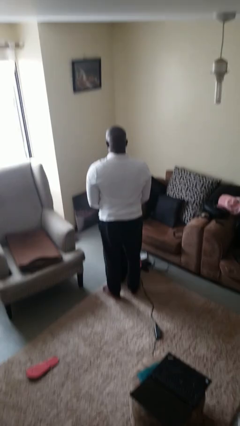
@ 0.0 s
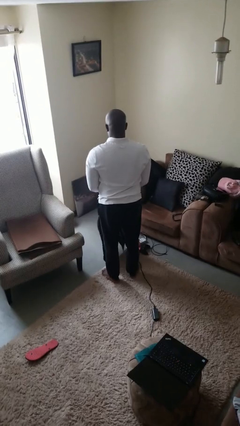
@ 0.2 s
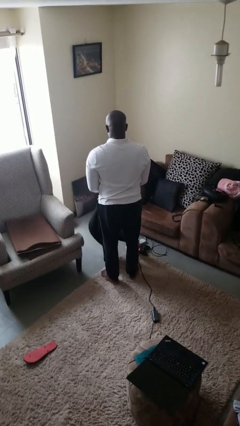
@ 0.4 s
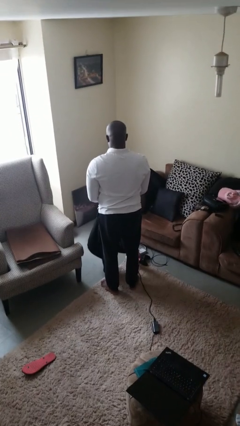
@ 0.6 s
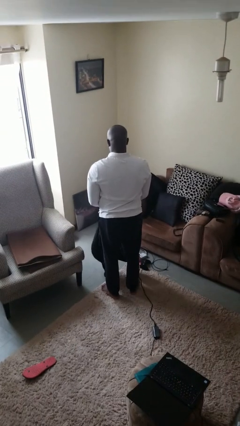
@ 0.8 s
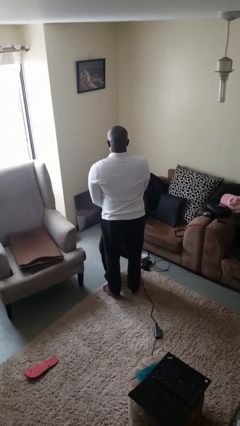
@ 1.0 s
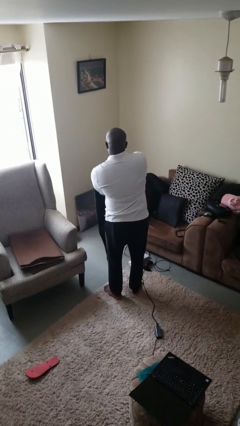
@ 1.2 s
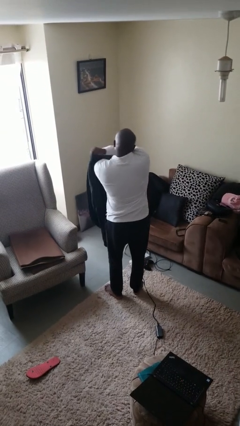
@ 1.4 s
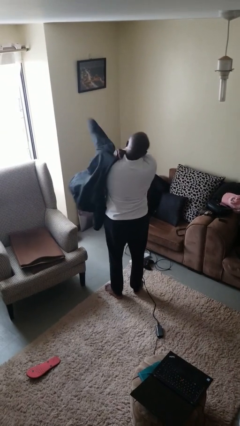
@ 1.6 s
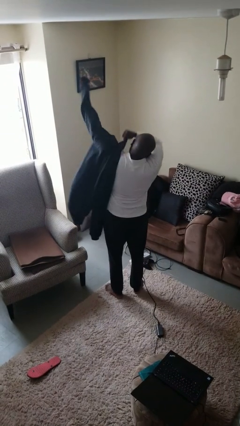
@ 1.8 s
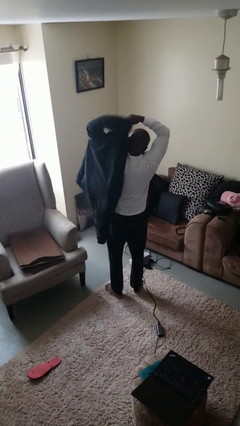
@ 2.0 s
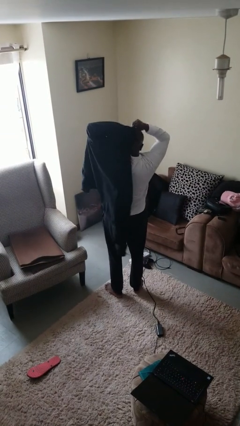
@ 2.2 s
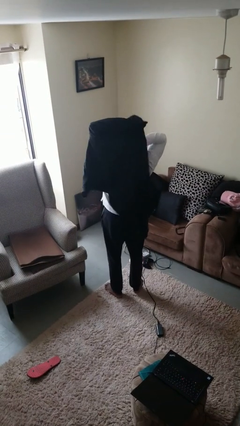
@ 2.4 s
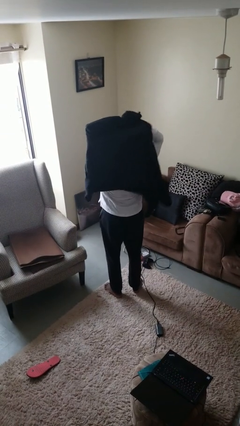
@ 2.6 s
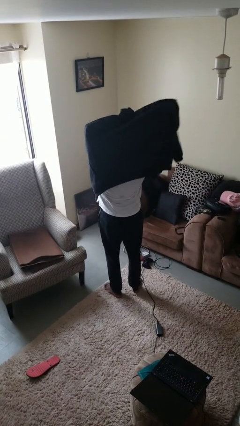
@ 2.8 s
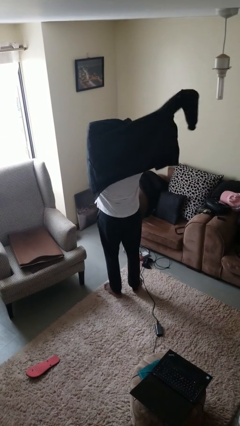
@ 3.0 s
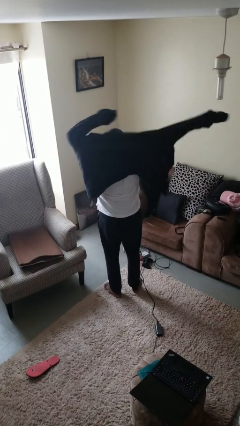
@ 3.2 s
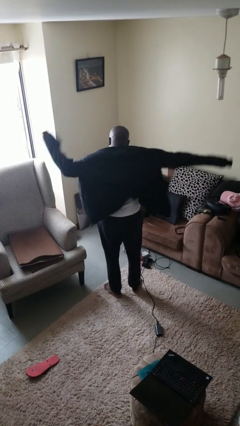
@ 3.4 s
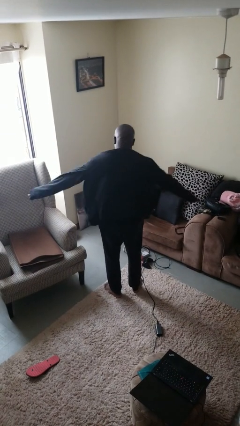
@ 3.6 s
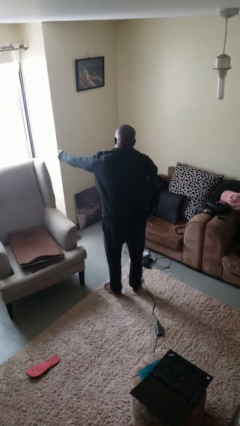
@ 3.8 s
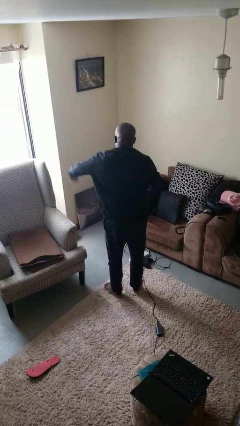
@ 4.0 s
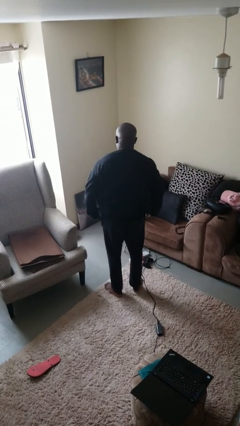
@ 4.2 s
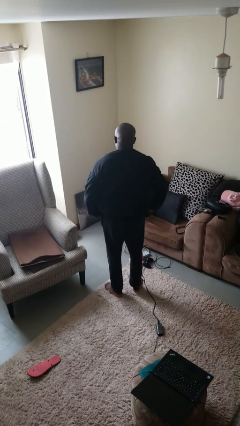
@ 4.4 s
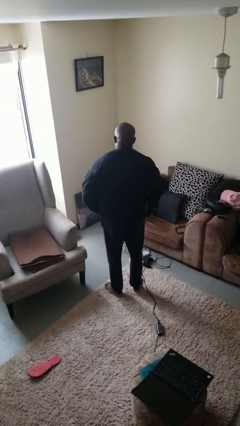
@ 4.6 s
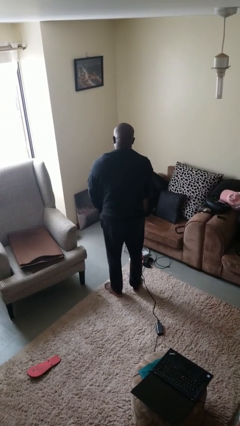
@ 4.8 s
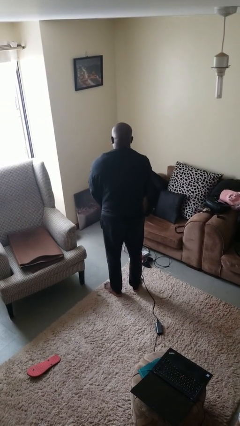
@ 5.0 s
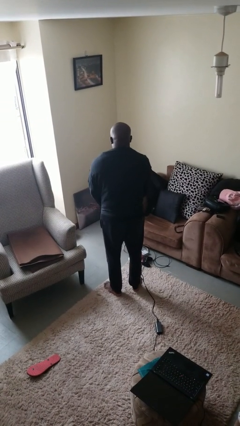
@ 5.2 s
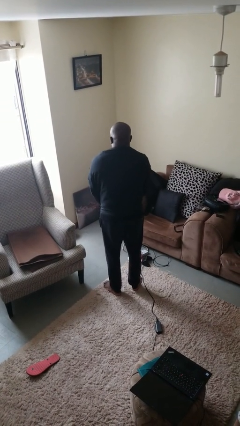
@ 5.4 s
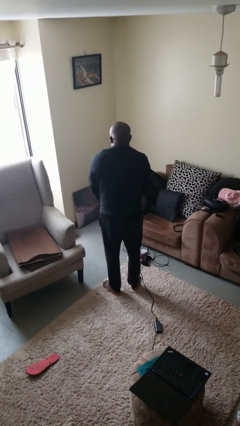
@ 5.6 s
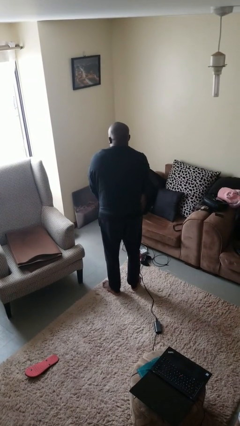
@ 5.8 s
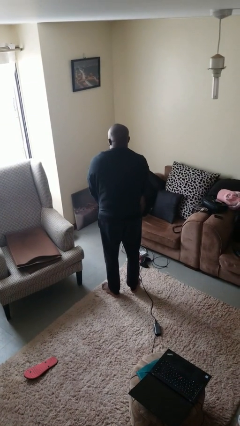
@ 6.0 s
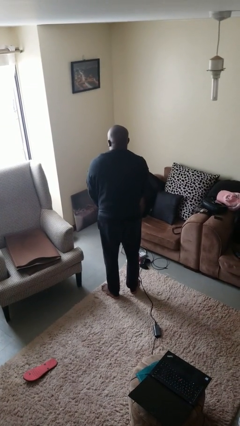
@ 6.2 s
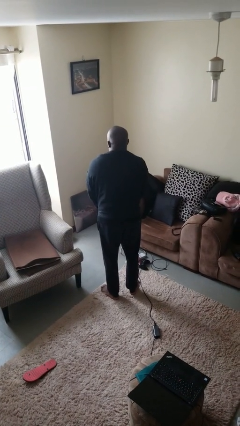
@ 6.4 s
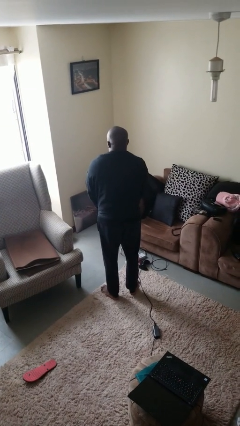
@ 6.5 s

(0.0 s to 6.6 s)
person puts on jacket

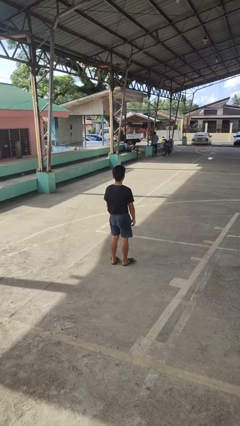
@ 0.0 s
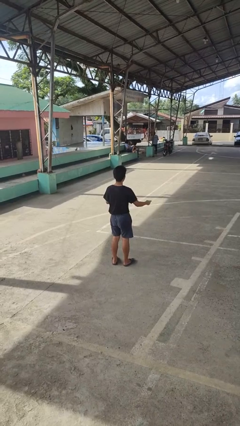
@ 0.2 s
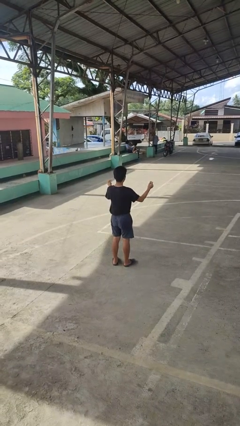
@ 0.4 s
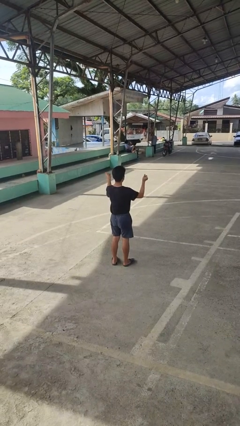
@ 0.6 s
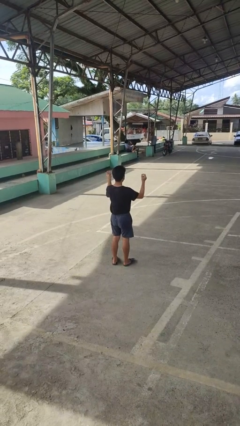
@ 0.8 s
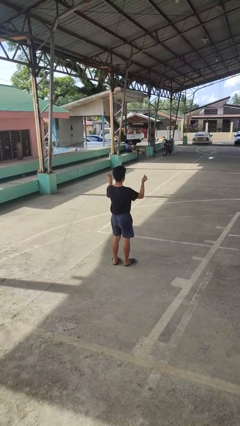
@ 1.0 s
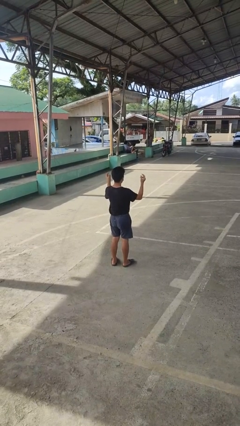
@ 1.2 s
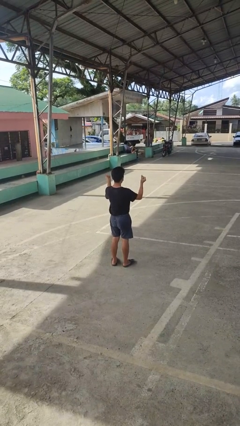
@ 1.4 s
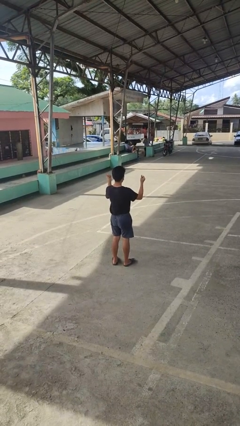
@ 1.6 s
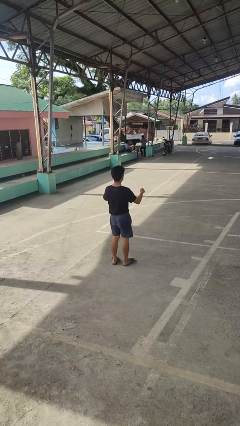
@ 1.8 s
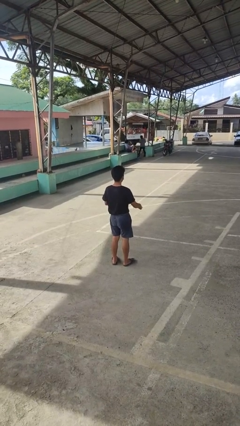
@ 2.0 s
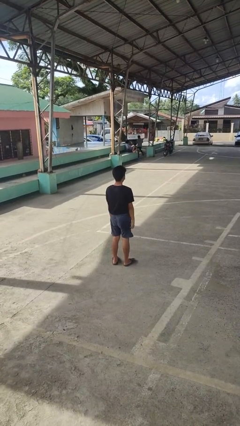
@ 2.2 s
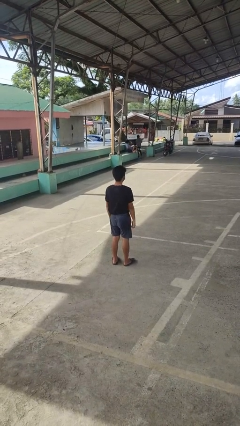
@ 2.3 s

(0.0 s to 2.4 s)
person snaps fingers

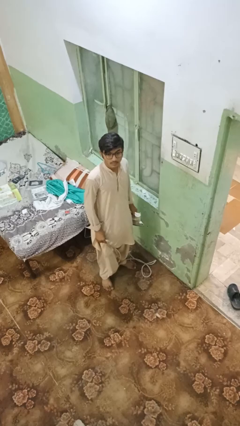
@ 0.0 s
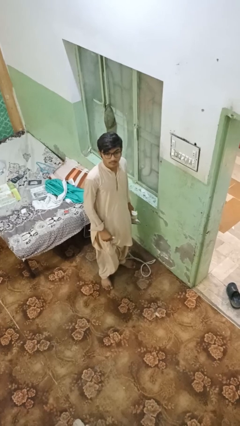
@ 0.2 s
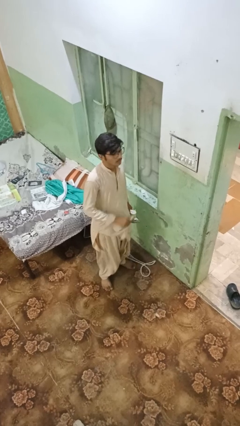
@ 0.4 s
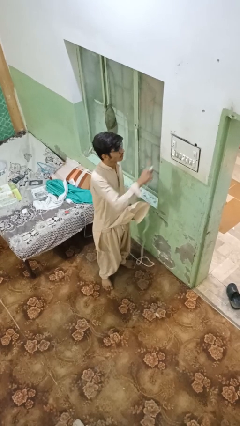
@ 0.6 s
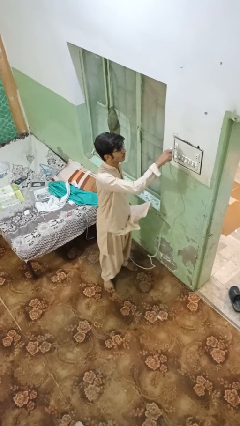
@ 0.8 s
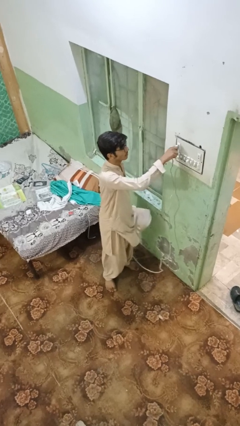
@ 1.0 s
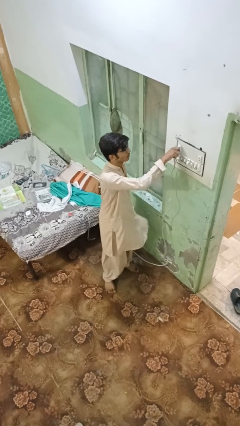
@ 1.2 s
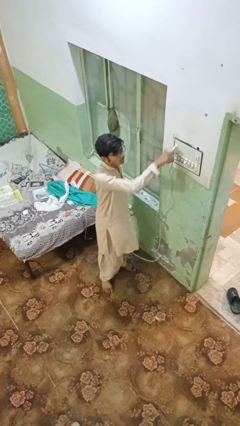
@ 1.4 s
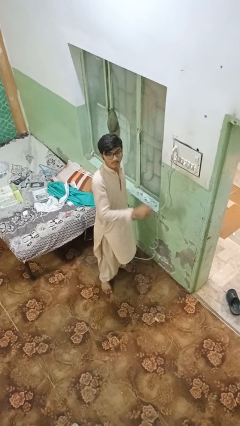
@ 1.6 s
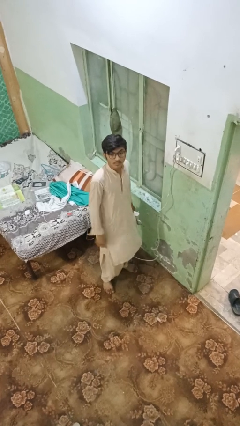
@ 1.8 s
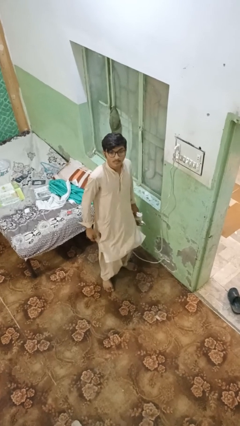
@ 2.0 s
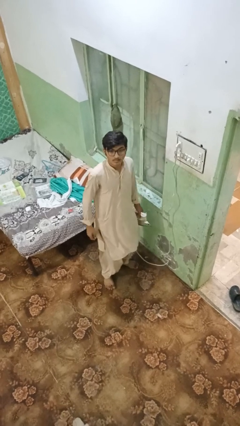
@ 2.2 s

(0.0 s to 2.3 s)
person plugs into electrical socket

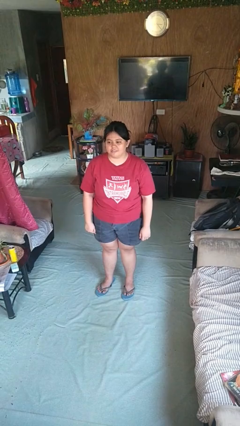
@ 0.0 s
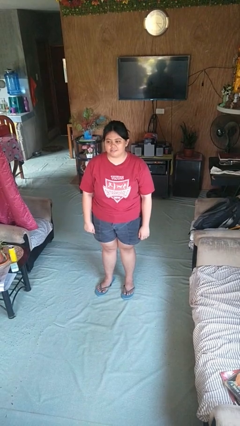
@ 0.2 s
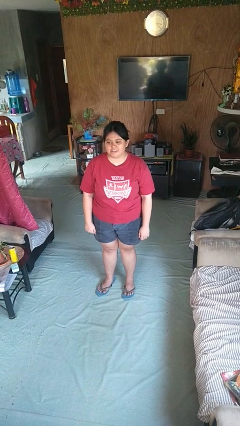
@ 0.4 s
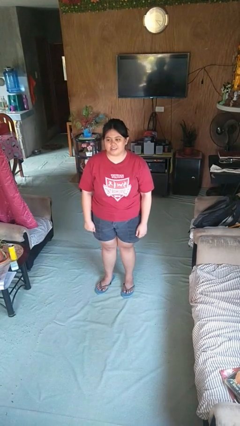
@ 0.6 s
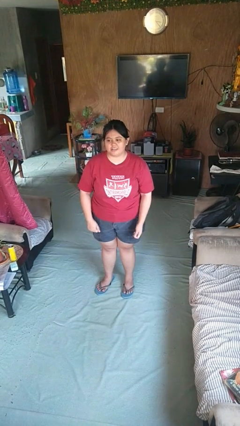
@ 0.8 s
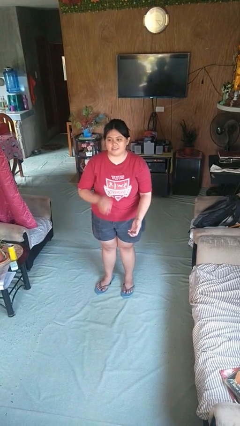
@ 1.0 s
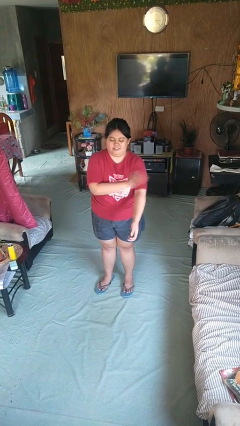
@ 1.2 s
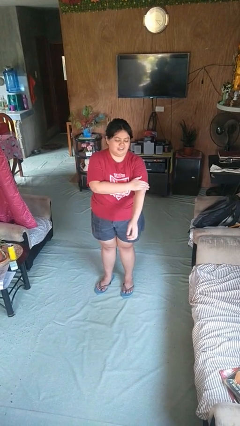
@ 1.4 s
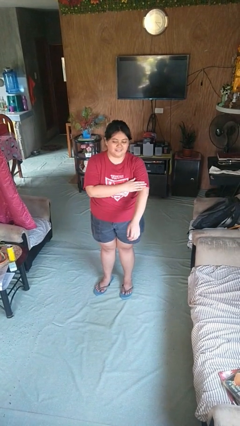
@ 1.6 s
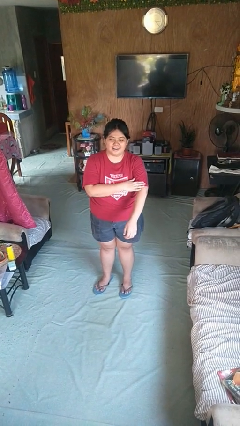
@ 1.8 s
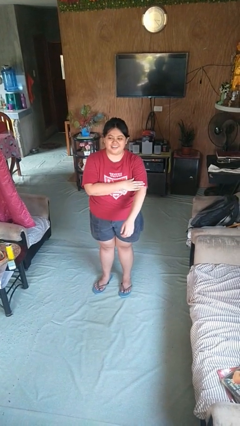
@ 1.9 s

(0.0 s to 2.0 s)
person swats bug

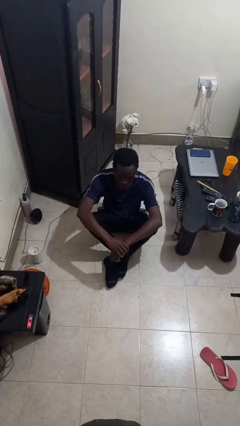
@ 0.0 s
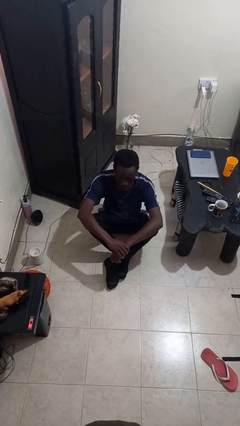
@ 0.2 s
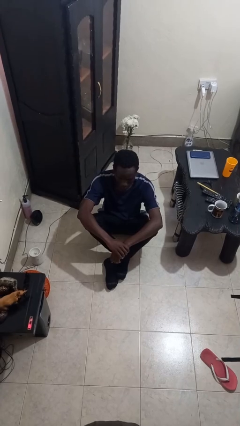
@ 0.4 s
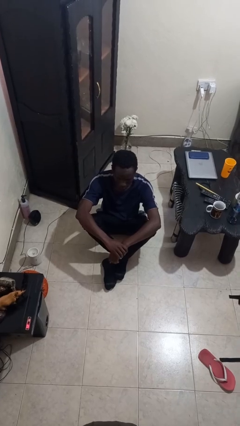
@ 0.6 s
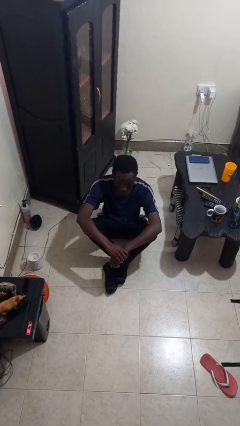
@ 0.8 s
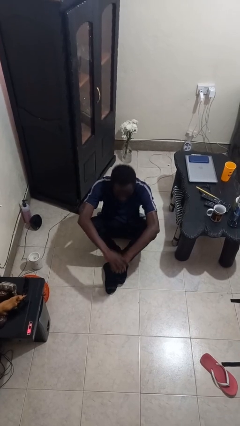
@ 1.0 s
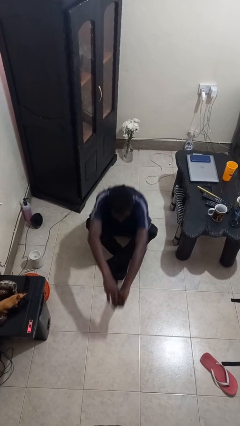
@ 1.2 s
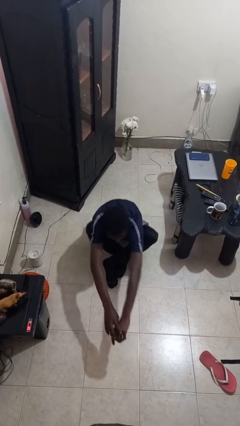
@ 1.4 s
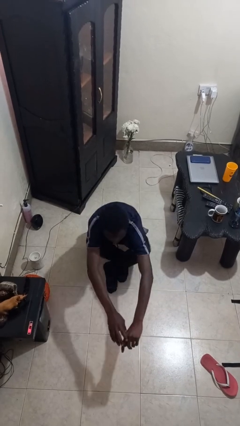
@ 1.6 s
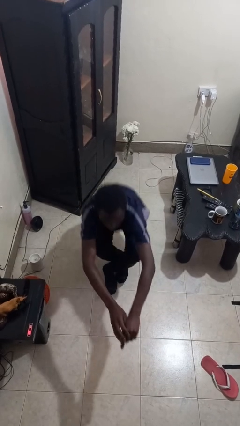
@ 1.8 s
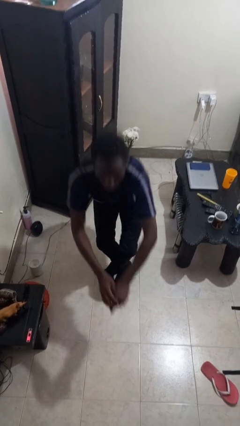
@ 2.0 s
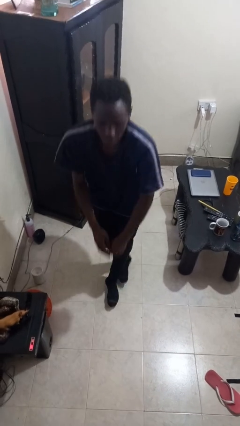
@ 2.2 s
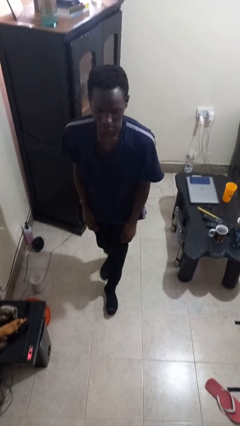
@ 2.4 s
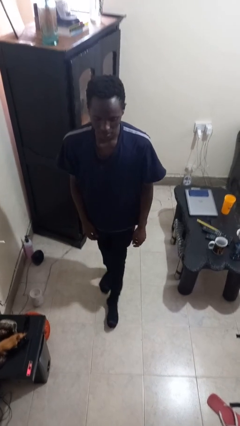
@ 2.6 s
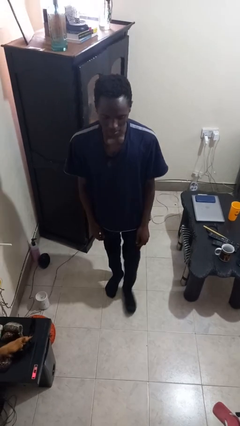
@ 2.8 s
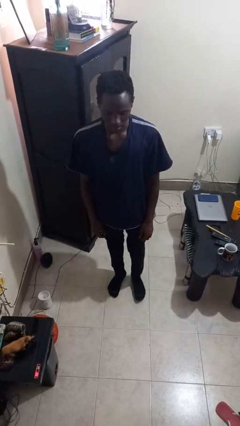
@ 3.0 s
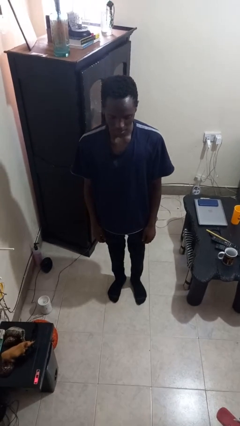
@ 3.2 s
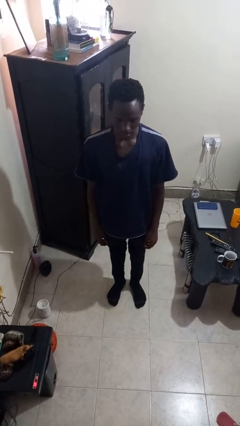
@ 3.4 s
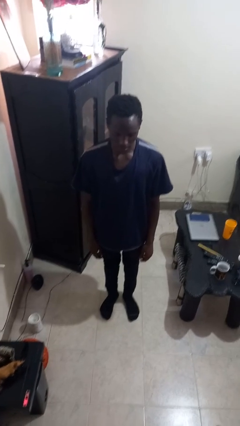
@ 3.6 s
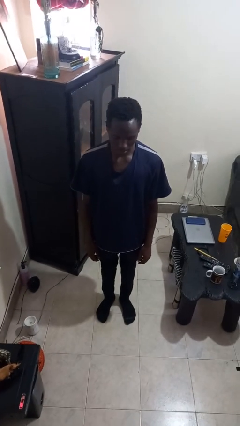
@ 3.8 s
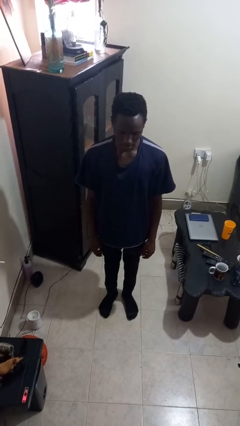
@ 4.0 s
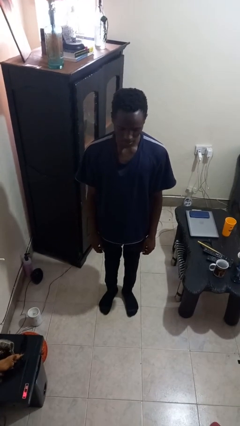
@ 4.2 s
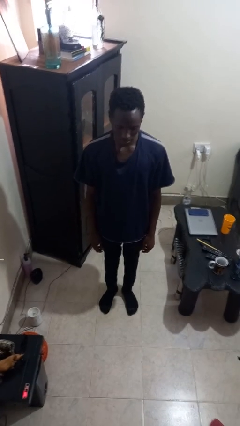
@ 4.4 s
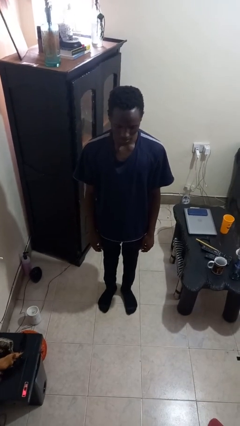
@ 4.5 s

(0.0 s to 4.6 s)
person stands up from floor

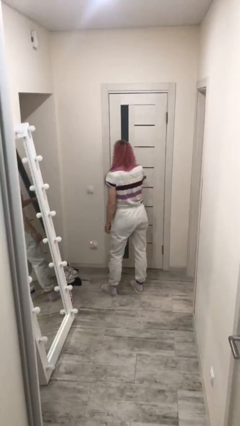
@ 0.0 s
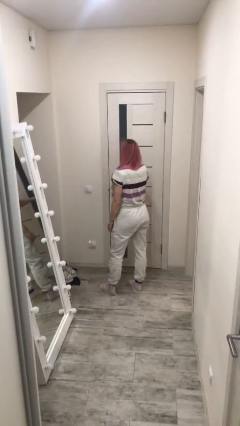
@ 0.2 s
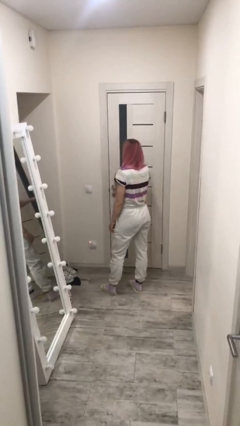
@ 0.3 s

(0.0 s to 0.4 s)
person closes facility door
